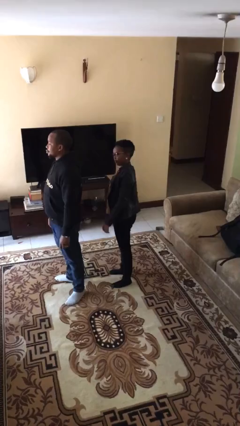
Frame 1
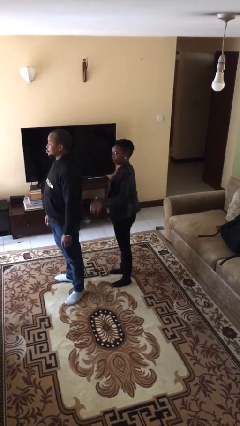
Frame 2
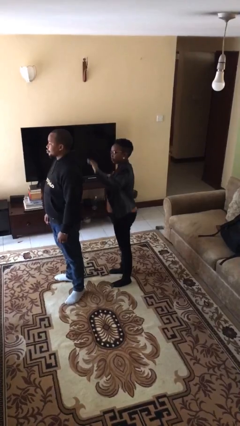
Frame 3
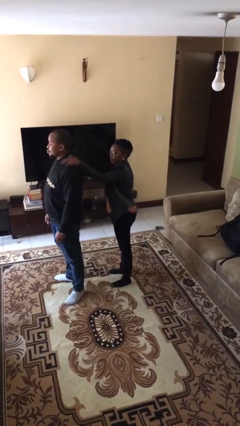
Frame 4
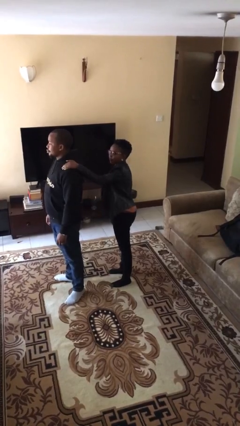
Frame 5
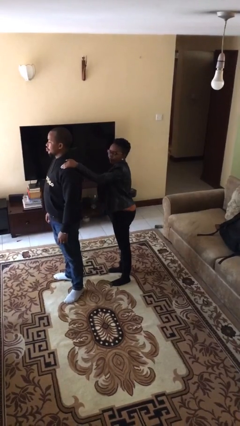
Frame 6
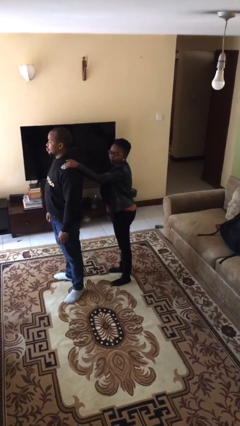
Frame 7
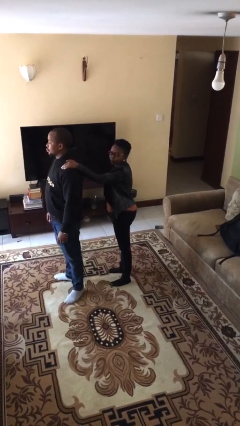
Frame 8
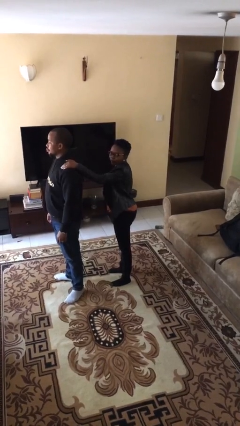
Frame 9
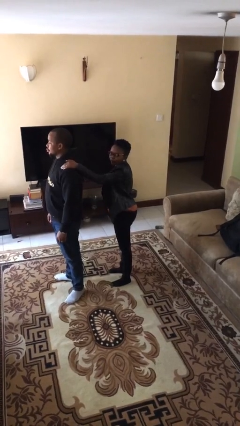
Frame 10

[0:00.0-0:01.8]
person grabs person by shoulder

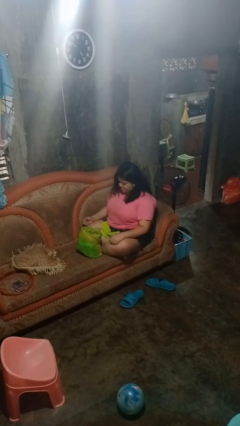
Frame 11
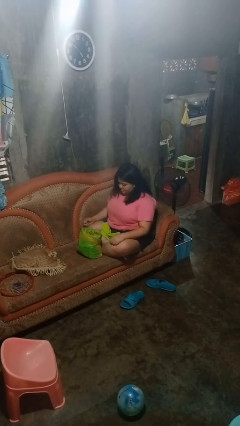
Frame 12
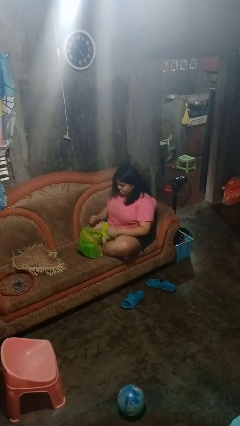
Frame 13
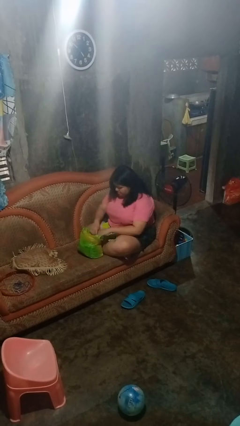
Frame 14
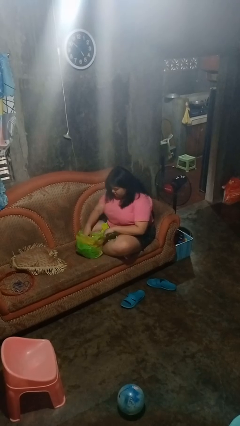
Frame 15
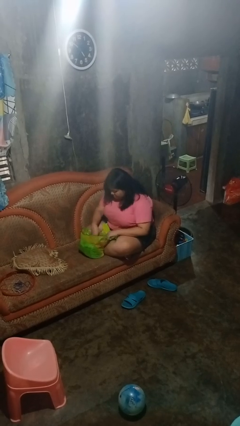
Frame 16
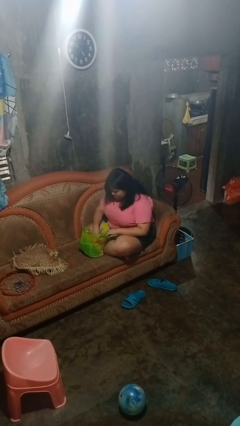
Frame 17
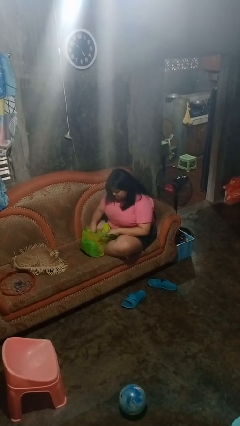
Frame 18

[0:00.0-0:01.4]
person searches in bag

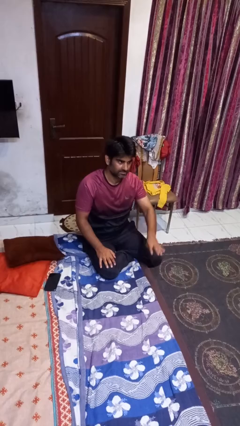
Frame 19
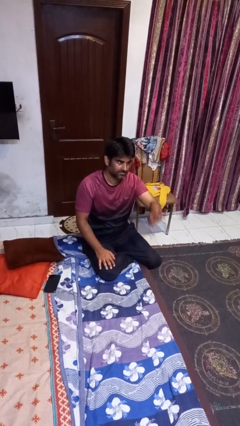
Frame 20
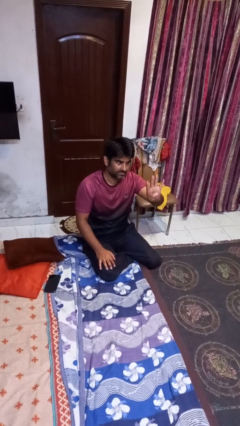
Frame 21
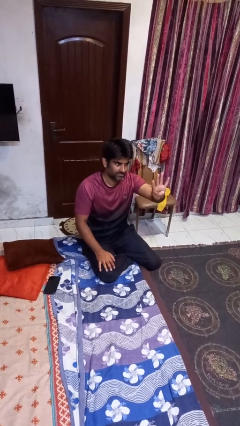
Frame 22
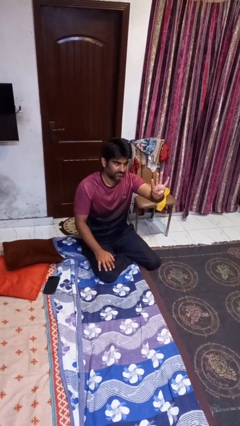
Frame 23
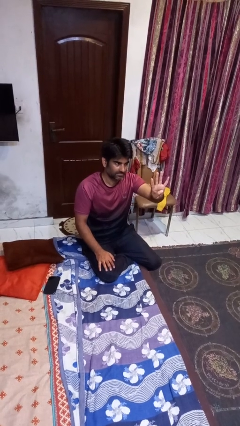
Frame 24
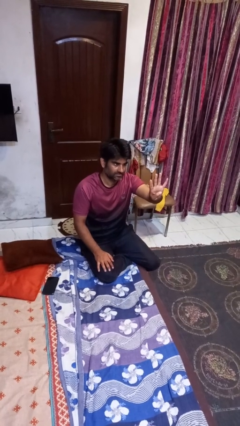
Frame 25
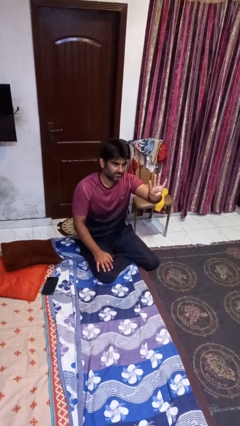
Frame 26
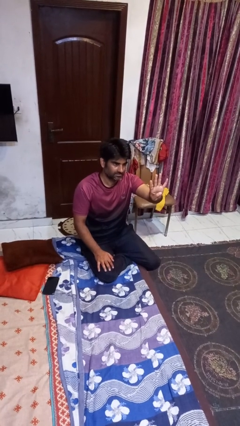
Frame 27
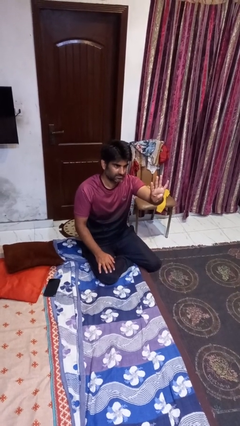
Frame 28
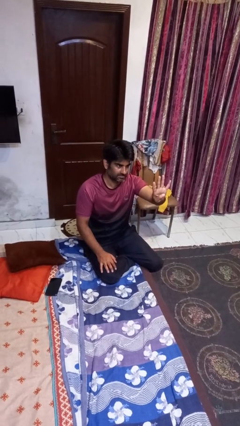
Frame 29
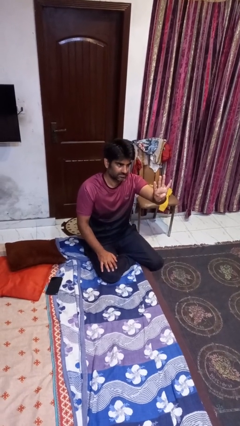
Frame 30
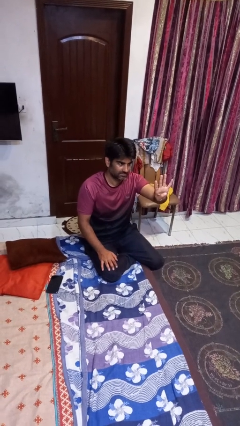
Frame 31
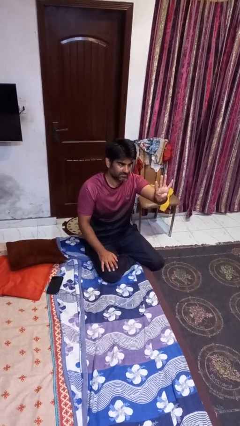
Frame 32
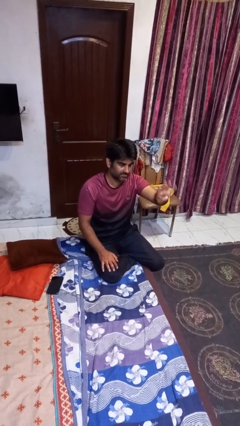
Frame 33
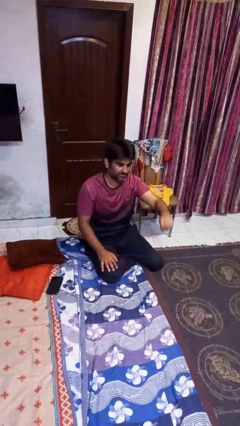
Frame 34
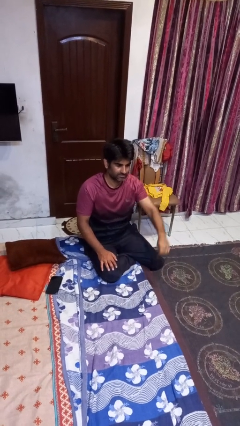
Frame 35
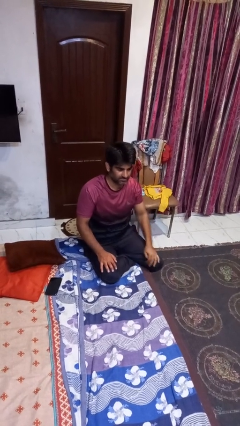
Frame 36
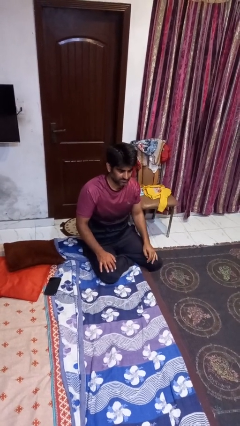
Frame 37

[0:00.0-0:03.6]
person gestures number four

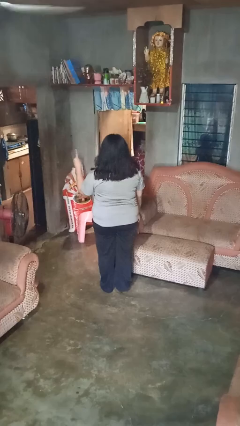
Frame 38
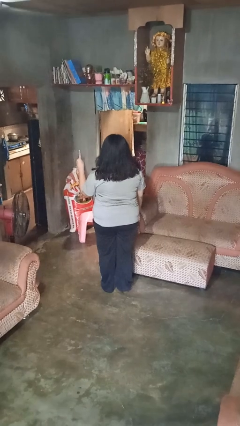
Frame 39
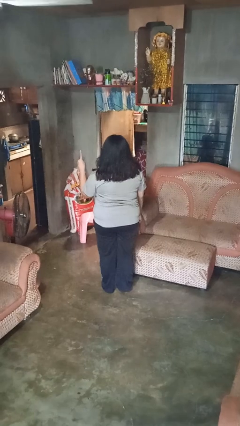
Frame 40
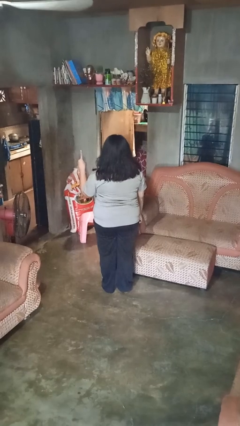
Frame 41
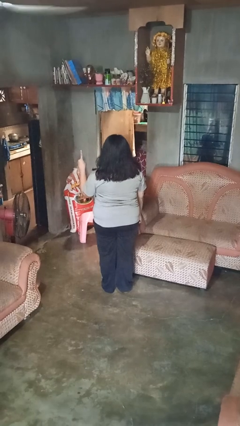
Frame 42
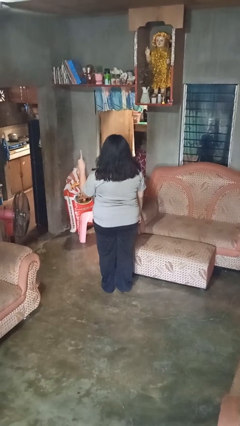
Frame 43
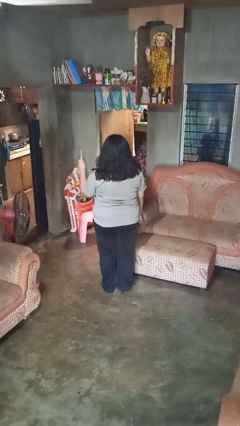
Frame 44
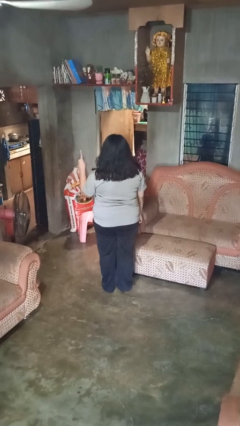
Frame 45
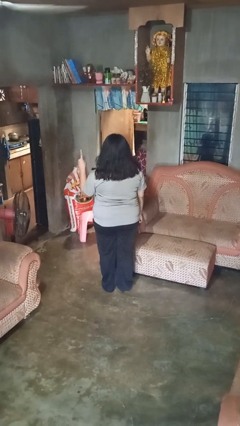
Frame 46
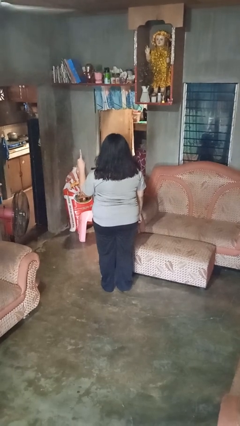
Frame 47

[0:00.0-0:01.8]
person gestures number one

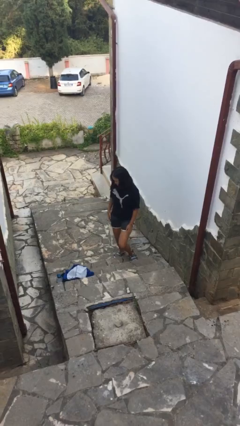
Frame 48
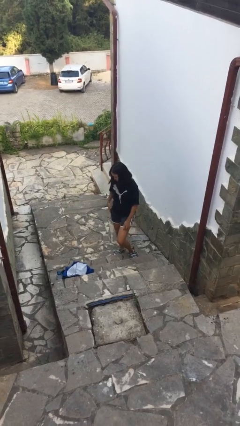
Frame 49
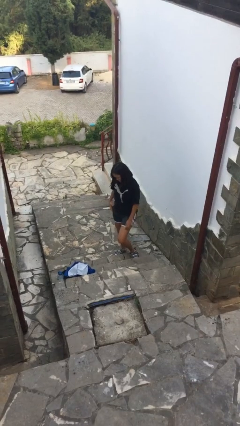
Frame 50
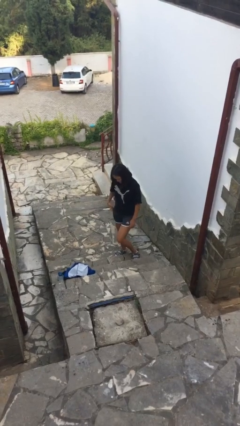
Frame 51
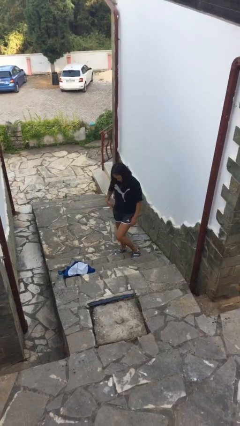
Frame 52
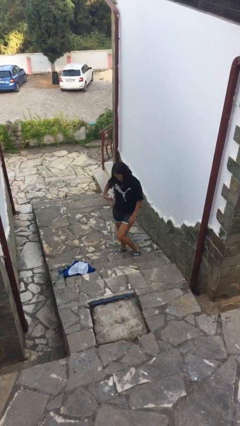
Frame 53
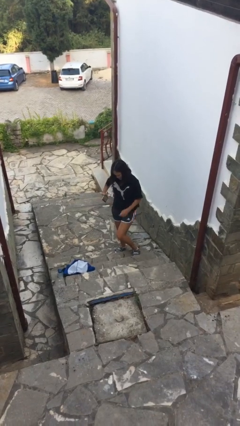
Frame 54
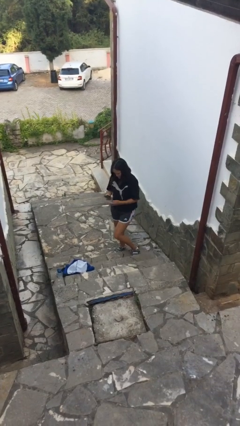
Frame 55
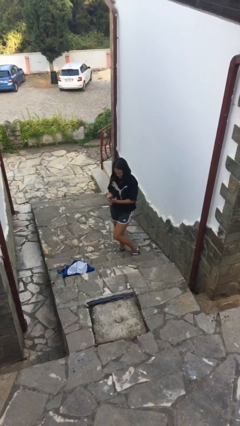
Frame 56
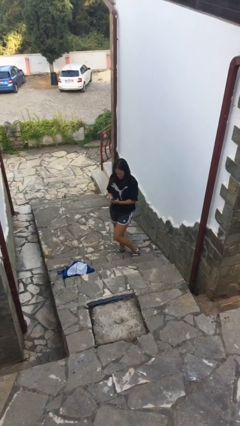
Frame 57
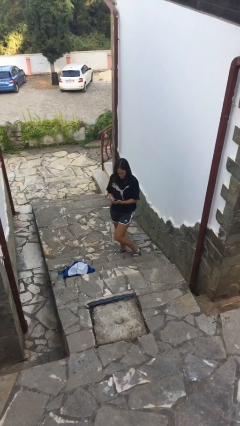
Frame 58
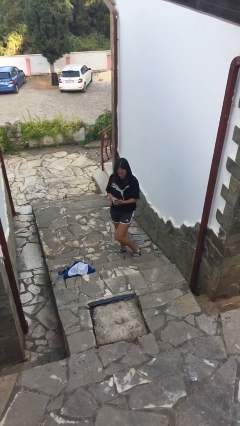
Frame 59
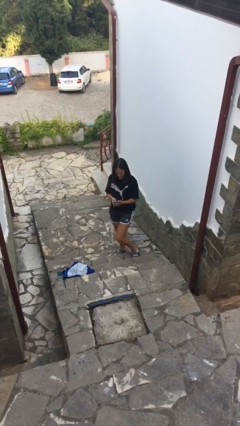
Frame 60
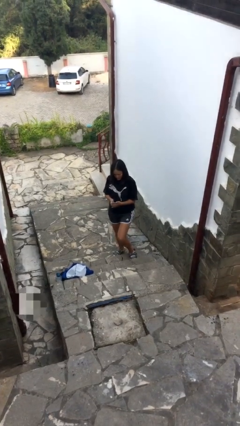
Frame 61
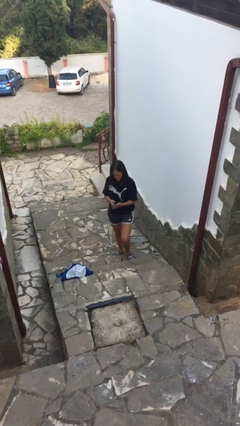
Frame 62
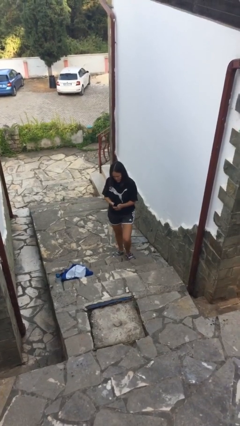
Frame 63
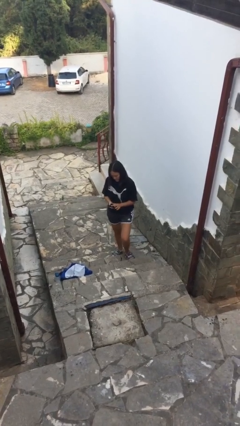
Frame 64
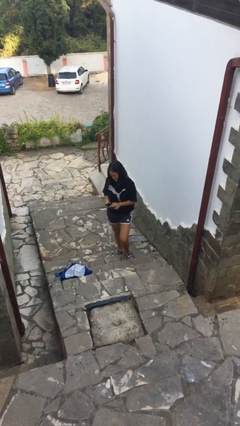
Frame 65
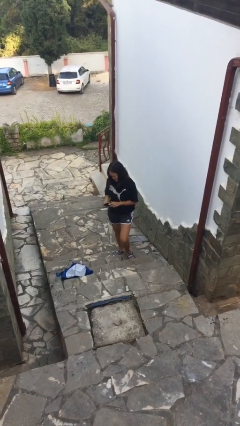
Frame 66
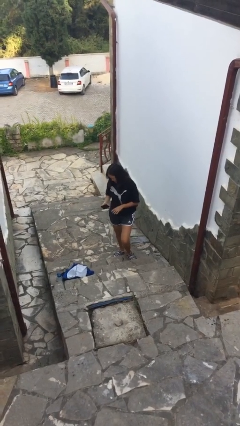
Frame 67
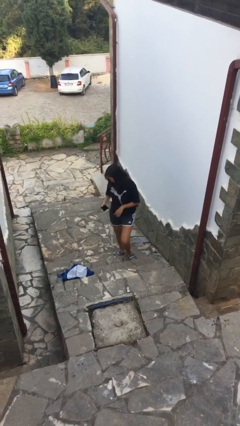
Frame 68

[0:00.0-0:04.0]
person takes phone from pocket

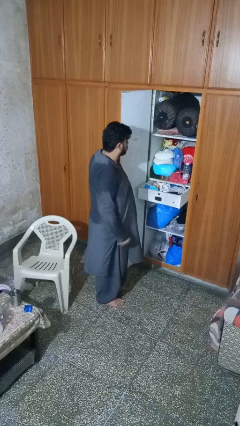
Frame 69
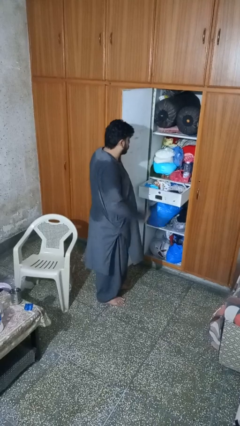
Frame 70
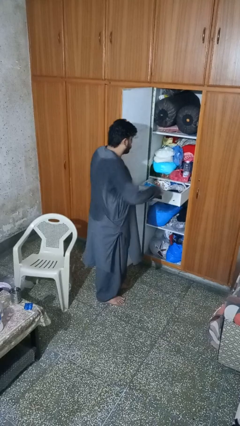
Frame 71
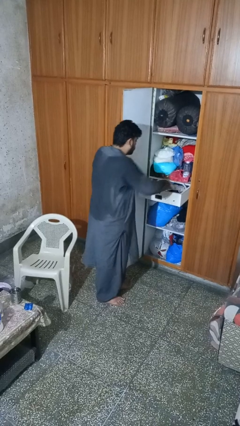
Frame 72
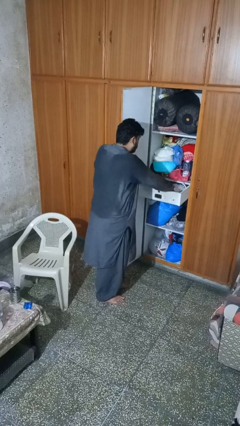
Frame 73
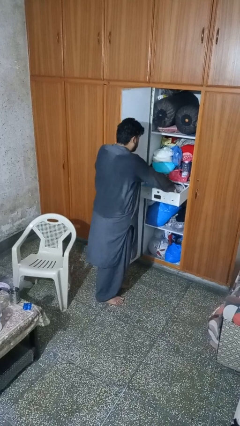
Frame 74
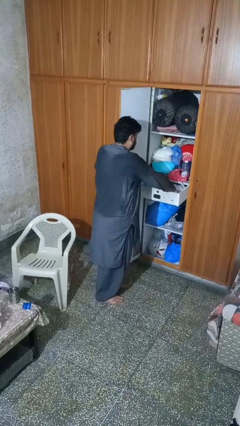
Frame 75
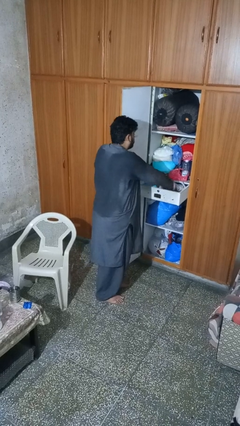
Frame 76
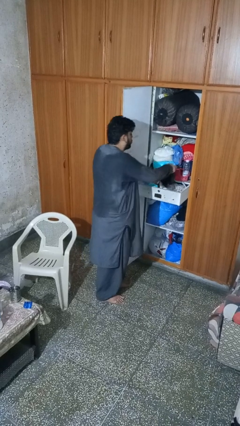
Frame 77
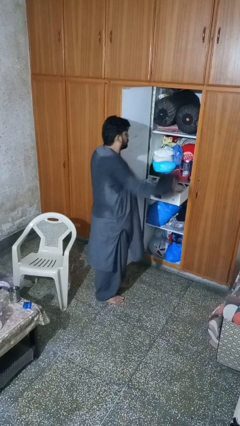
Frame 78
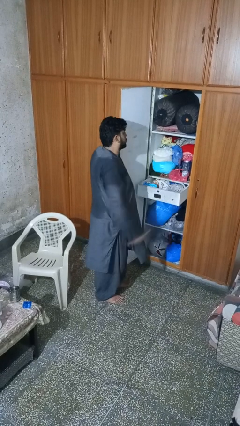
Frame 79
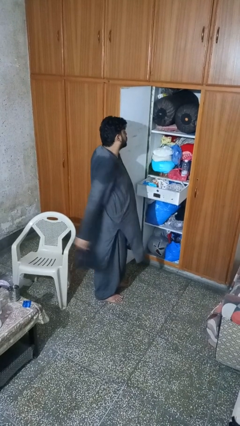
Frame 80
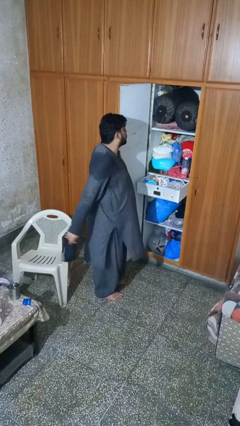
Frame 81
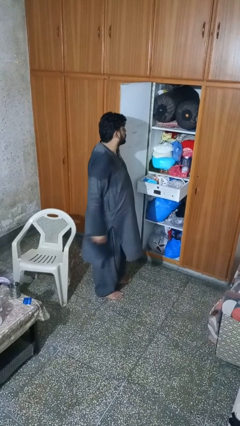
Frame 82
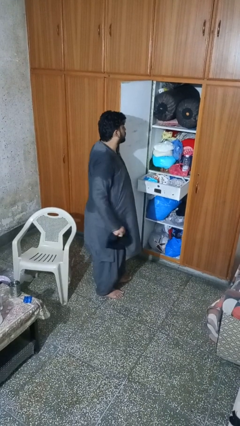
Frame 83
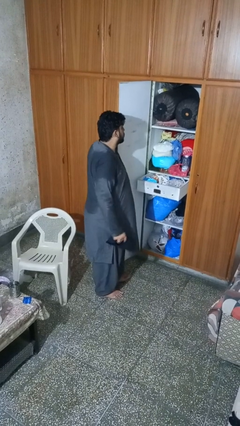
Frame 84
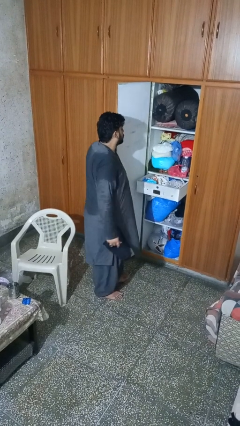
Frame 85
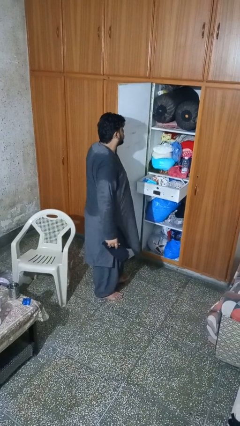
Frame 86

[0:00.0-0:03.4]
person takes clothes from dresser

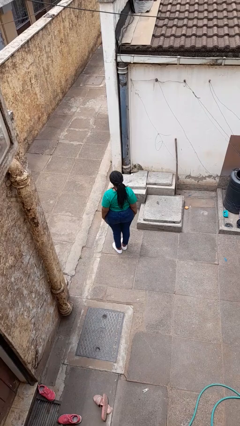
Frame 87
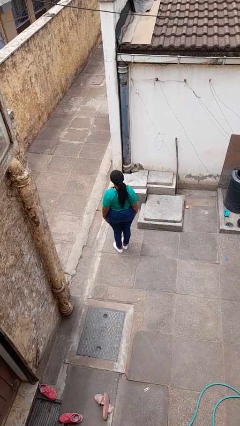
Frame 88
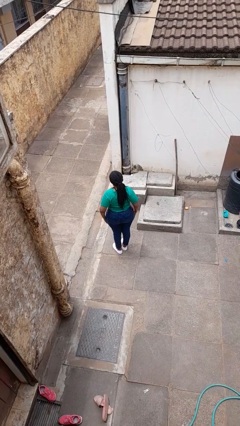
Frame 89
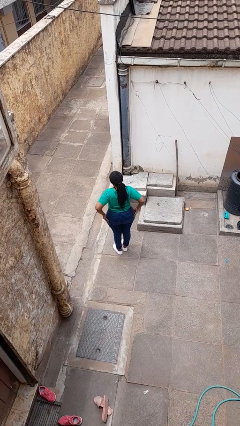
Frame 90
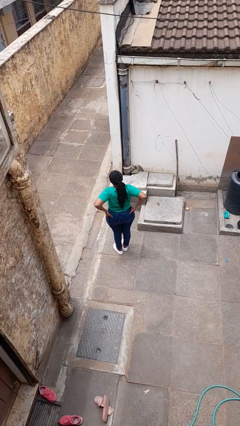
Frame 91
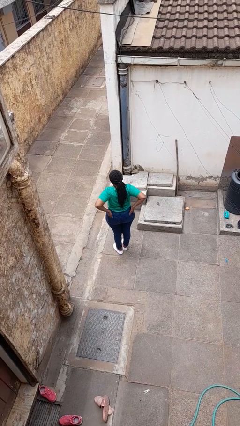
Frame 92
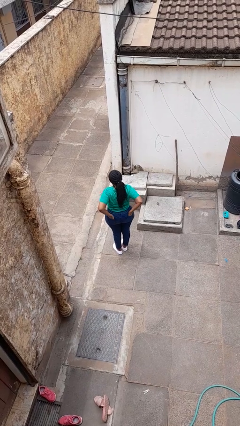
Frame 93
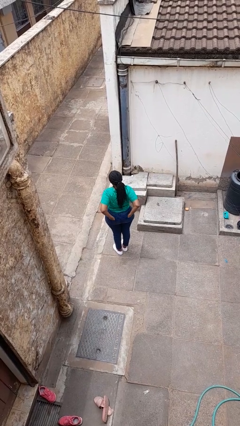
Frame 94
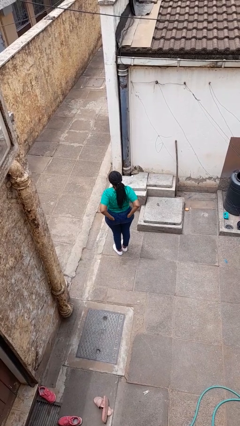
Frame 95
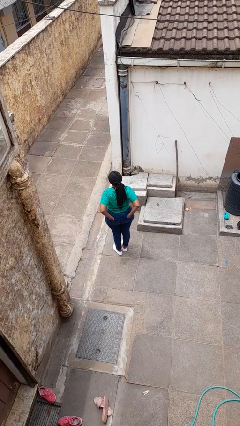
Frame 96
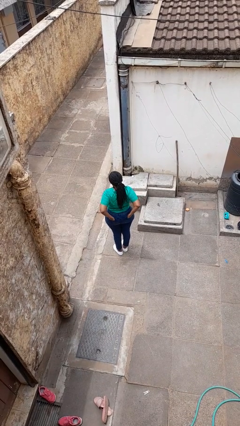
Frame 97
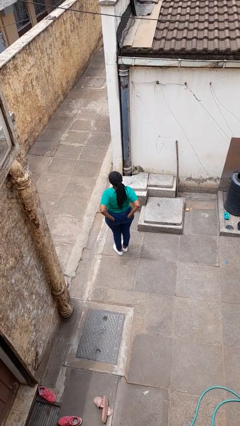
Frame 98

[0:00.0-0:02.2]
person puts hands in back pockets
